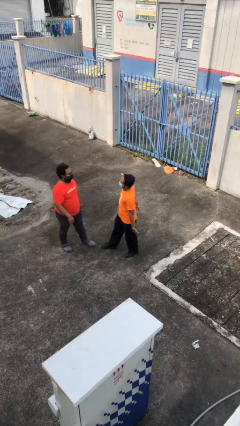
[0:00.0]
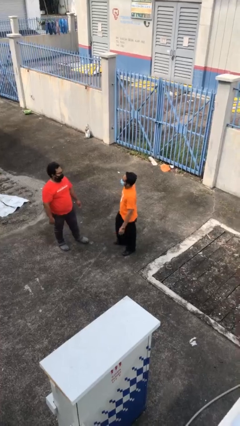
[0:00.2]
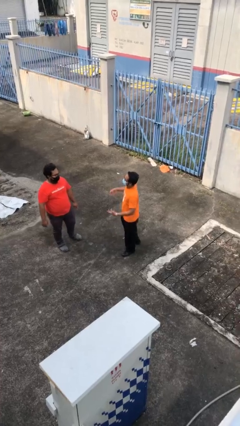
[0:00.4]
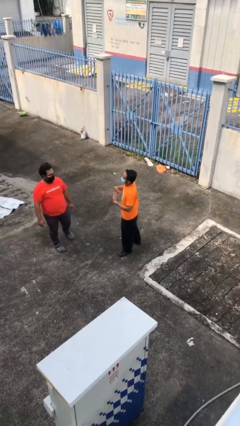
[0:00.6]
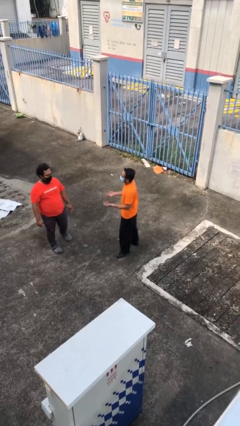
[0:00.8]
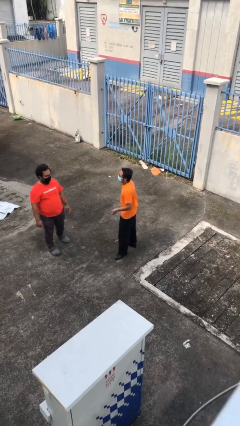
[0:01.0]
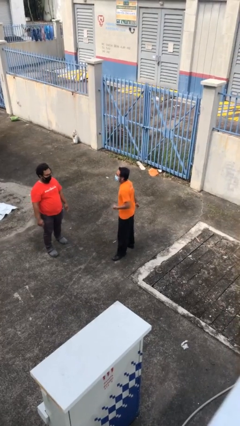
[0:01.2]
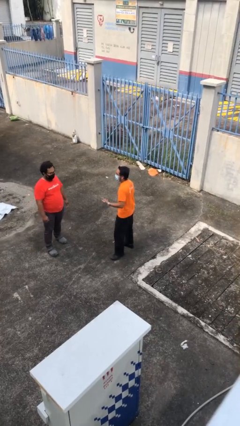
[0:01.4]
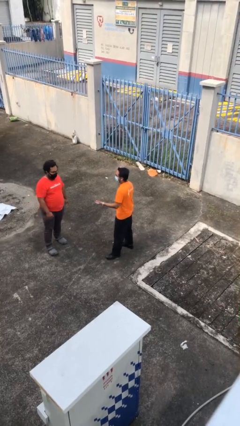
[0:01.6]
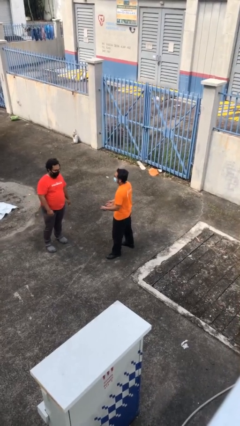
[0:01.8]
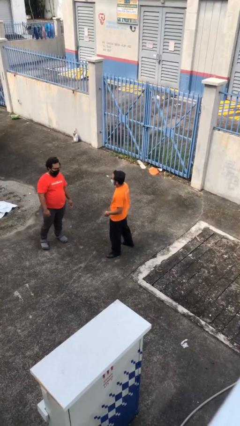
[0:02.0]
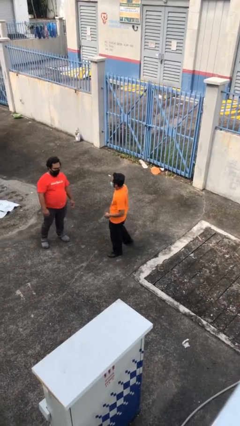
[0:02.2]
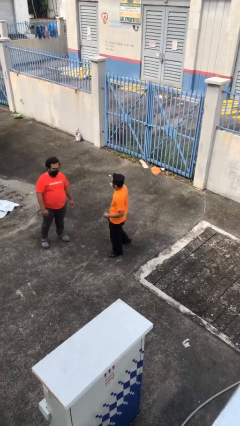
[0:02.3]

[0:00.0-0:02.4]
person talks to person

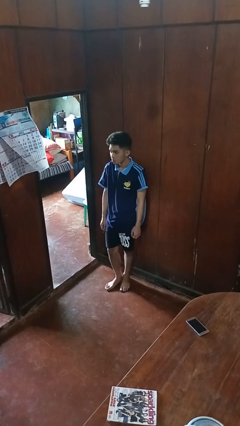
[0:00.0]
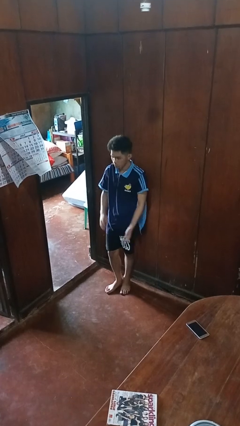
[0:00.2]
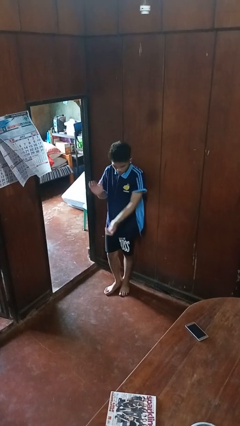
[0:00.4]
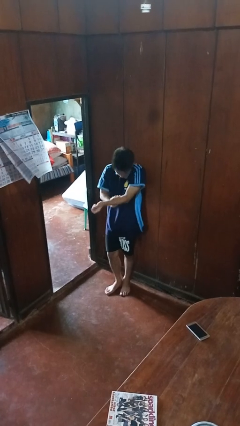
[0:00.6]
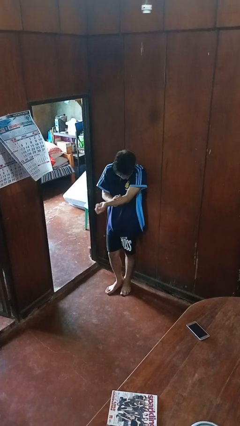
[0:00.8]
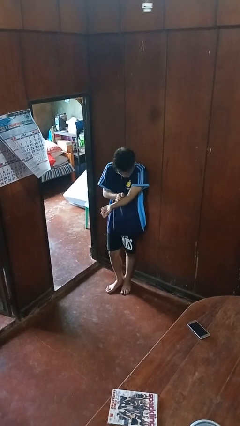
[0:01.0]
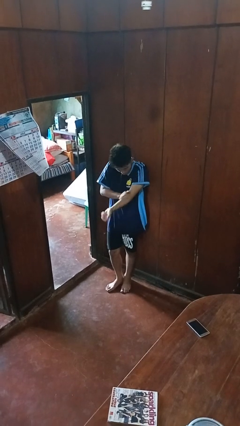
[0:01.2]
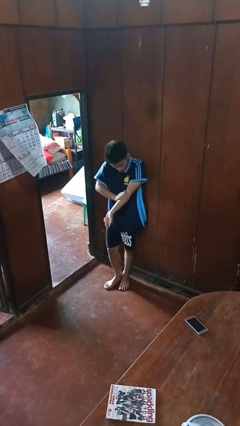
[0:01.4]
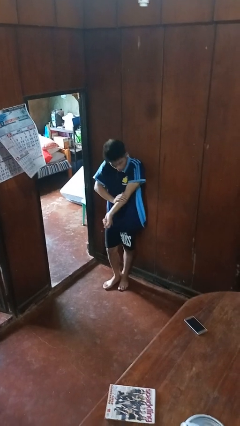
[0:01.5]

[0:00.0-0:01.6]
person swats bug

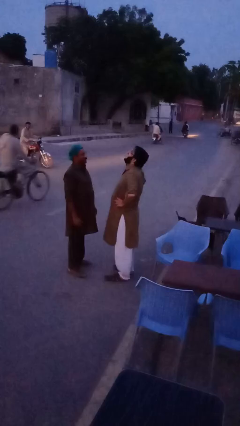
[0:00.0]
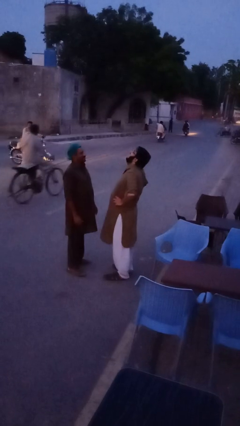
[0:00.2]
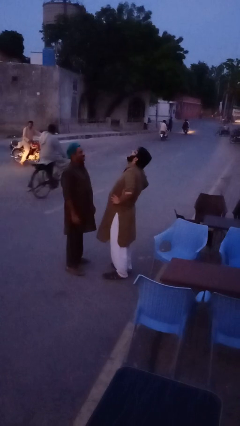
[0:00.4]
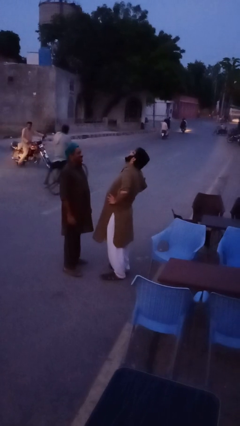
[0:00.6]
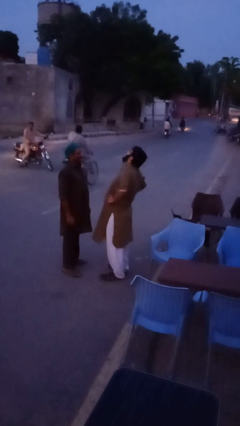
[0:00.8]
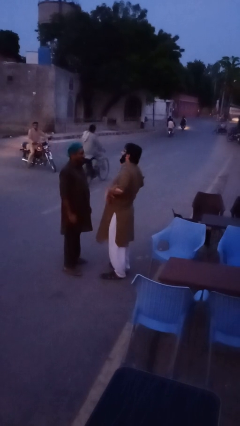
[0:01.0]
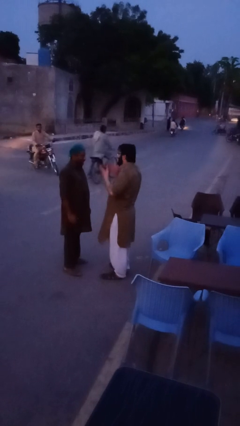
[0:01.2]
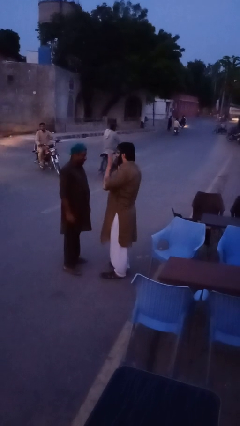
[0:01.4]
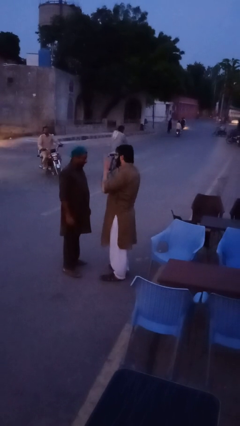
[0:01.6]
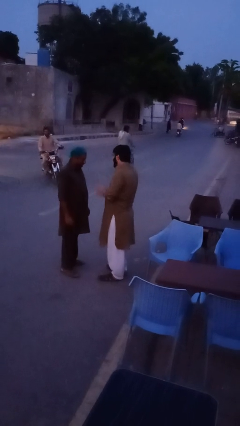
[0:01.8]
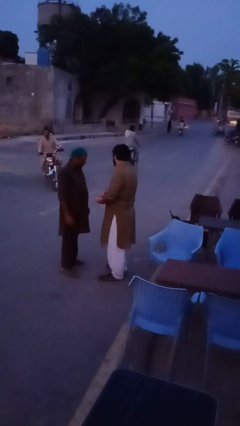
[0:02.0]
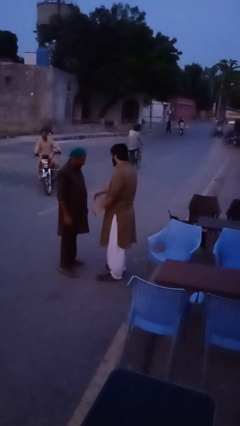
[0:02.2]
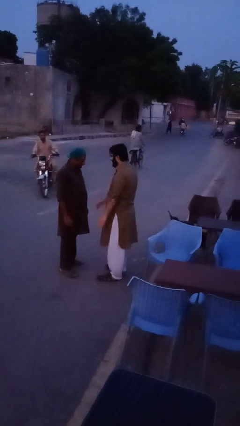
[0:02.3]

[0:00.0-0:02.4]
person laughs with person

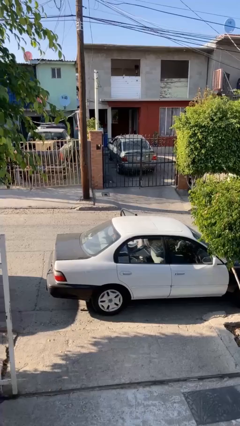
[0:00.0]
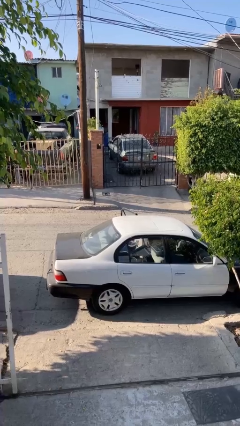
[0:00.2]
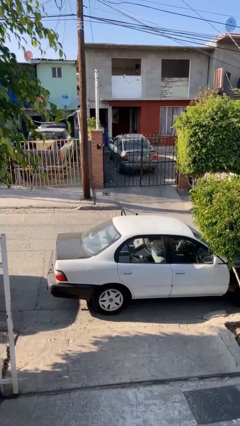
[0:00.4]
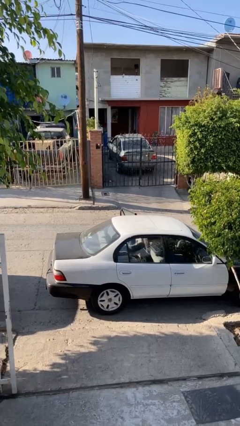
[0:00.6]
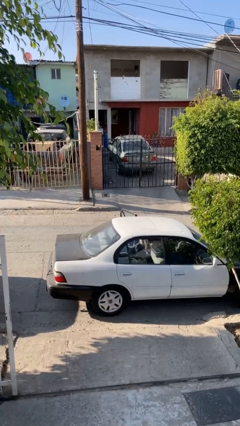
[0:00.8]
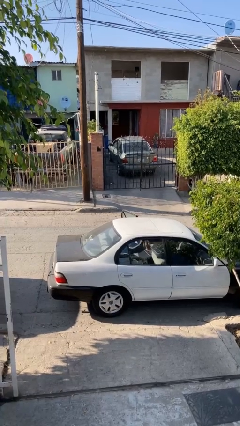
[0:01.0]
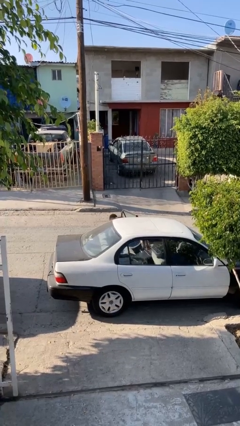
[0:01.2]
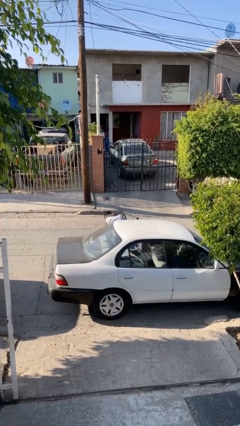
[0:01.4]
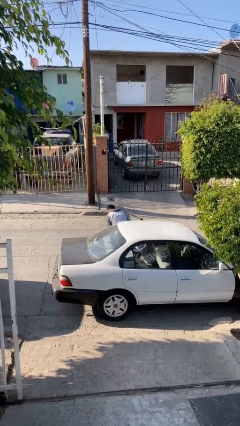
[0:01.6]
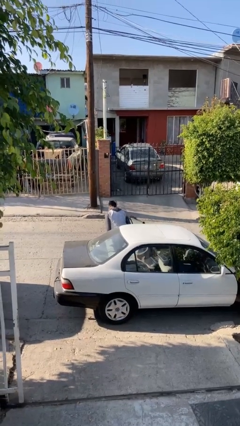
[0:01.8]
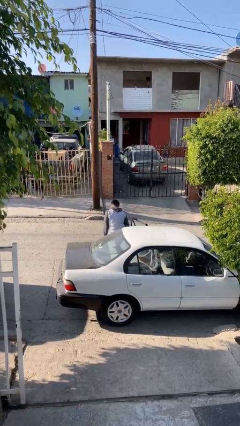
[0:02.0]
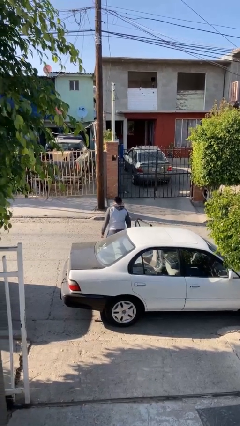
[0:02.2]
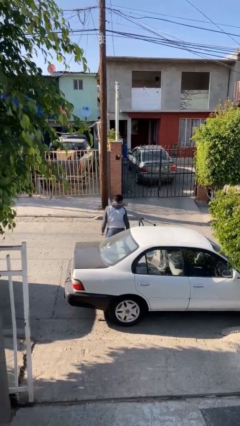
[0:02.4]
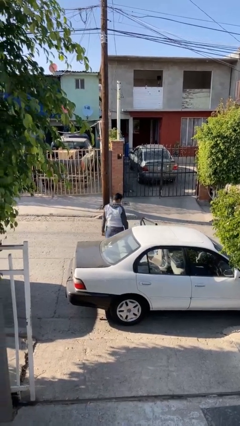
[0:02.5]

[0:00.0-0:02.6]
person exits car

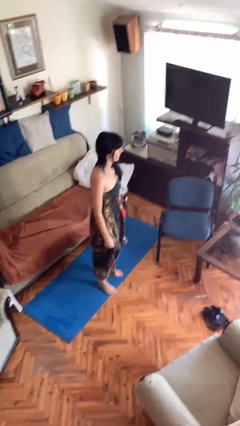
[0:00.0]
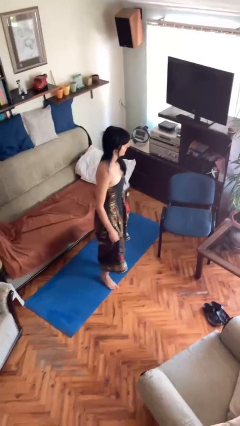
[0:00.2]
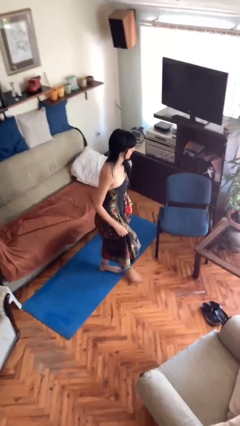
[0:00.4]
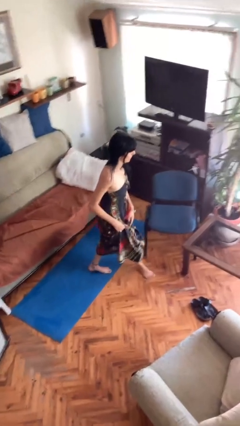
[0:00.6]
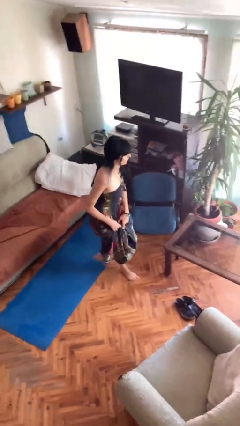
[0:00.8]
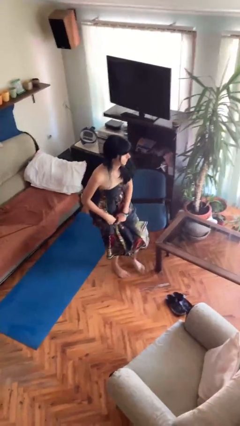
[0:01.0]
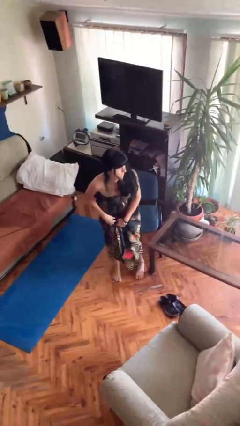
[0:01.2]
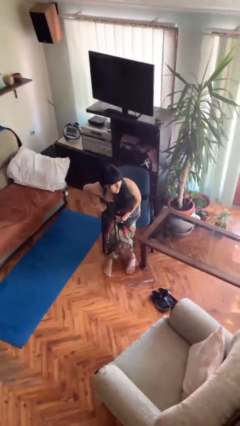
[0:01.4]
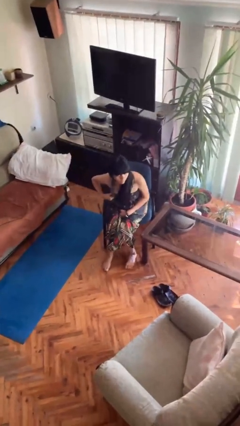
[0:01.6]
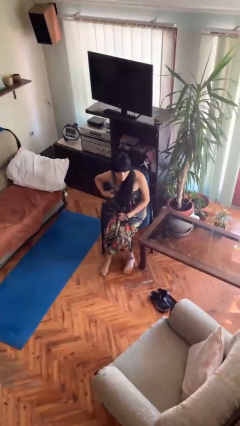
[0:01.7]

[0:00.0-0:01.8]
person sits down

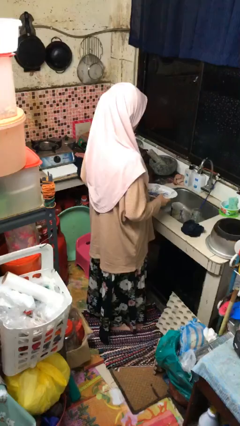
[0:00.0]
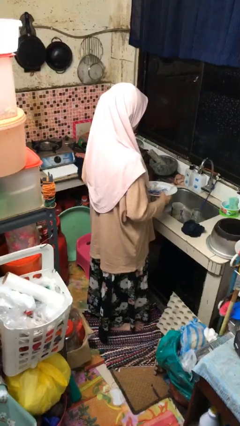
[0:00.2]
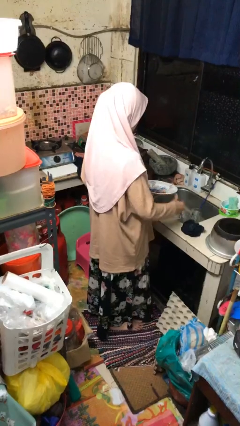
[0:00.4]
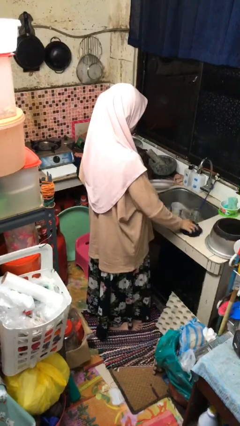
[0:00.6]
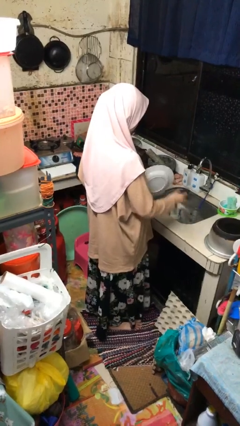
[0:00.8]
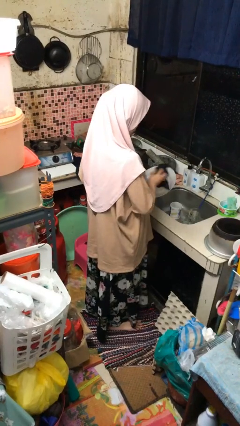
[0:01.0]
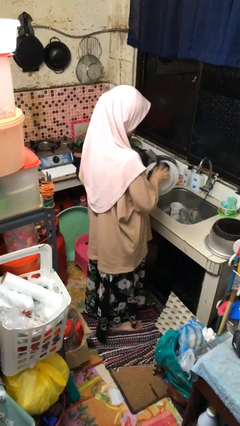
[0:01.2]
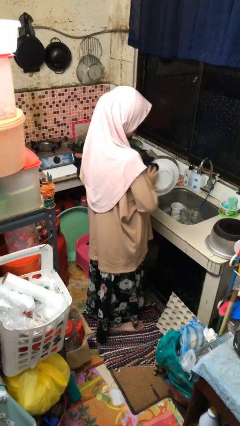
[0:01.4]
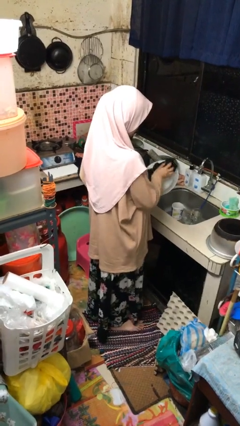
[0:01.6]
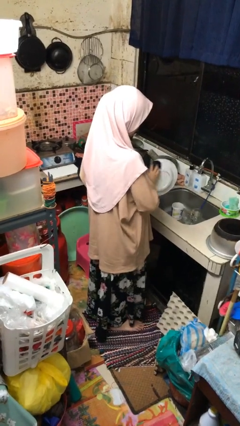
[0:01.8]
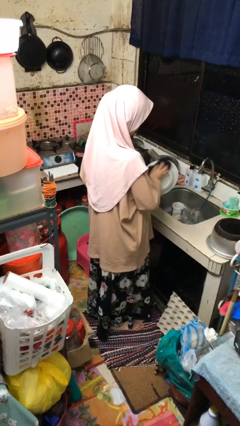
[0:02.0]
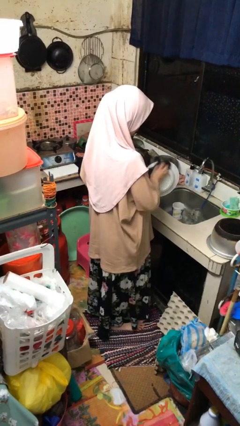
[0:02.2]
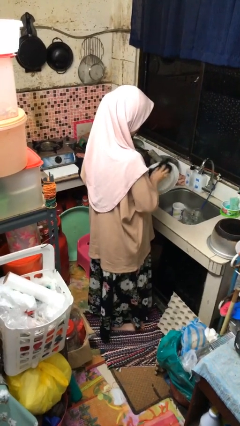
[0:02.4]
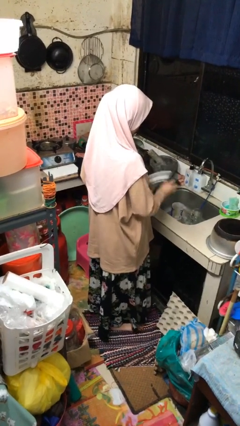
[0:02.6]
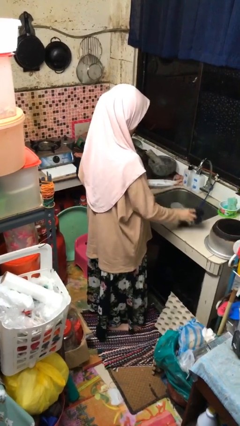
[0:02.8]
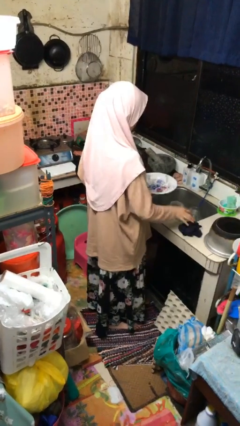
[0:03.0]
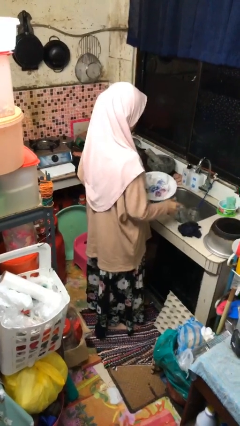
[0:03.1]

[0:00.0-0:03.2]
person dries dish

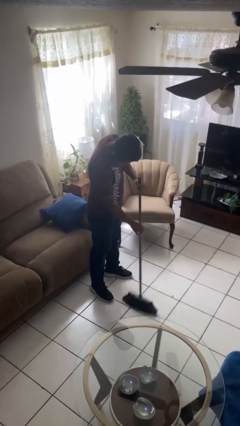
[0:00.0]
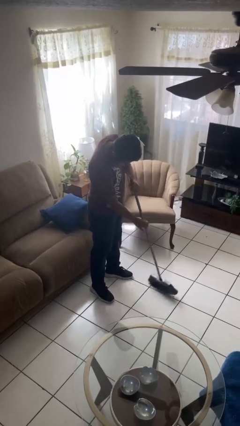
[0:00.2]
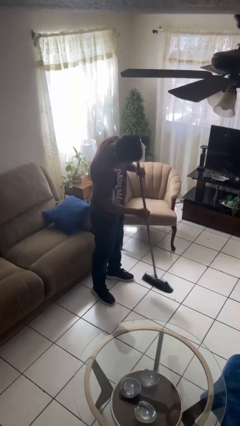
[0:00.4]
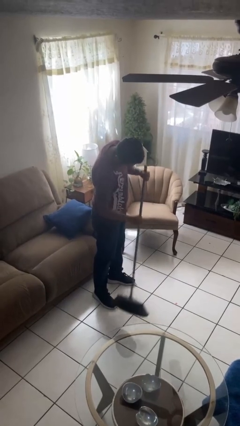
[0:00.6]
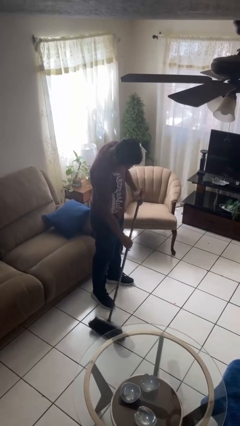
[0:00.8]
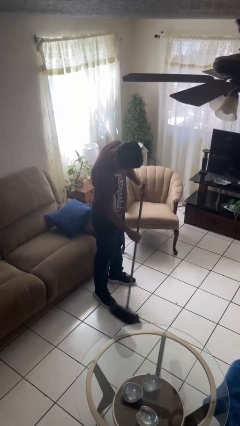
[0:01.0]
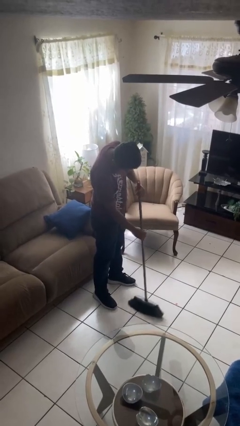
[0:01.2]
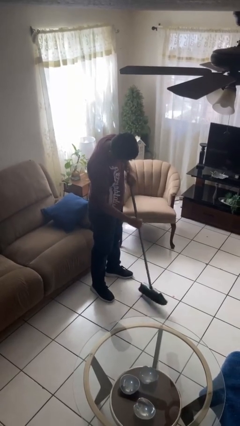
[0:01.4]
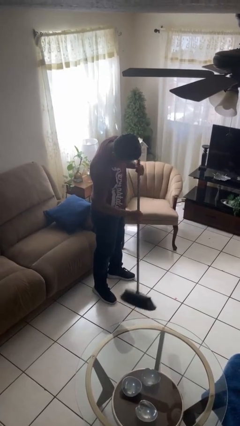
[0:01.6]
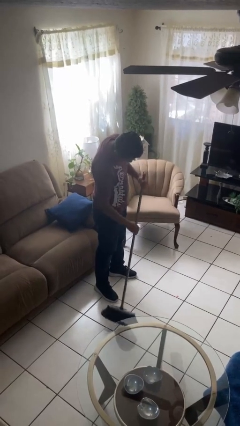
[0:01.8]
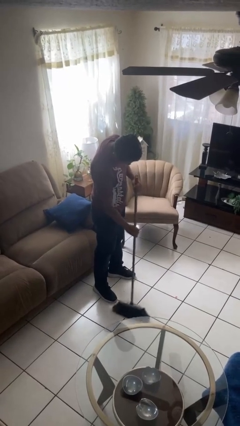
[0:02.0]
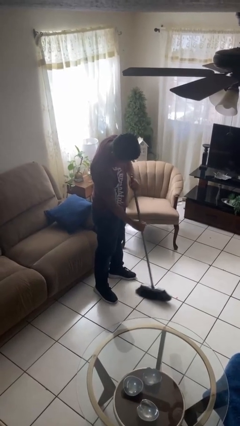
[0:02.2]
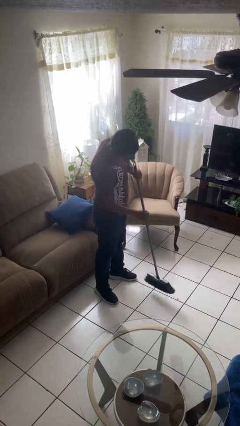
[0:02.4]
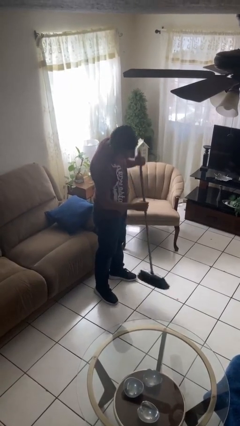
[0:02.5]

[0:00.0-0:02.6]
person sweeps floor

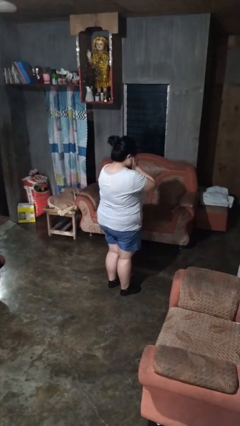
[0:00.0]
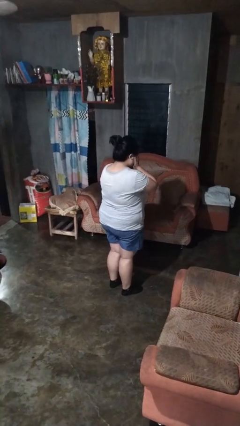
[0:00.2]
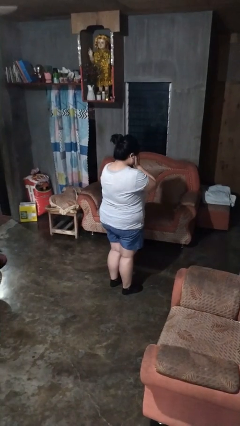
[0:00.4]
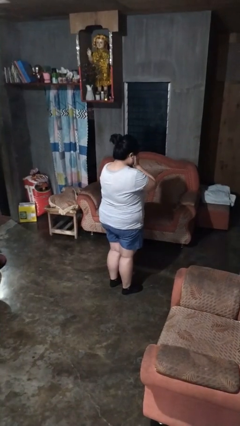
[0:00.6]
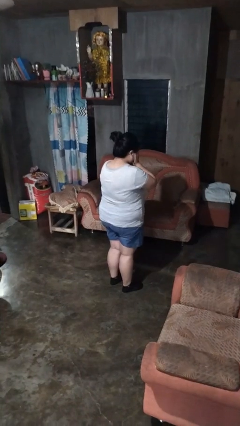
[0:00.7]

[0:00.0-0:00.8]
person covers face with hands
